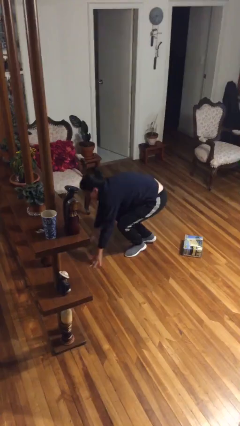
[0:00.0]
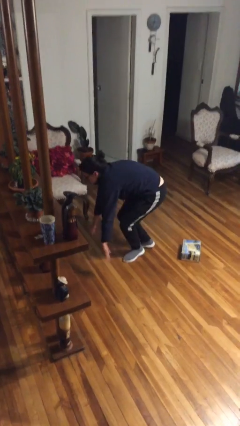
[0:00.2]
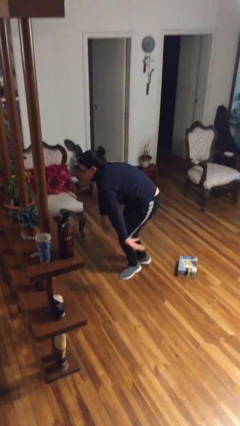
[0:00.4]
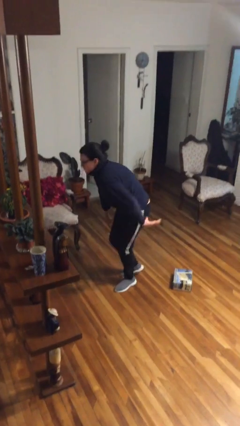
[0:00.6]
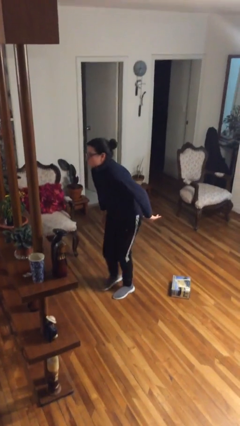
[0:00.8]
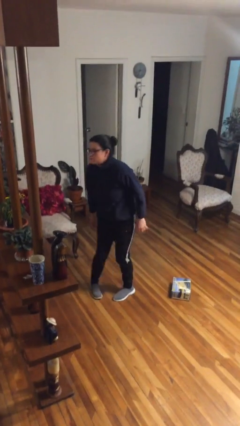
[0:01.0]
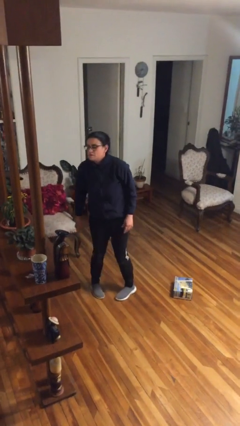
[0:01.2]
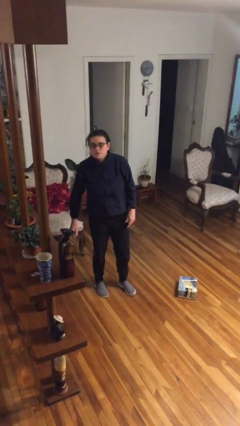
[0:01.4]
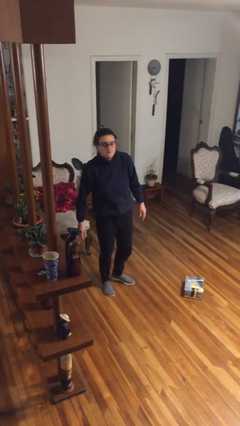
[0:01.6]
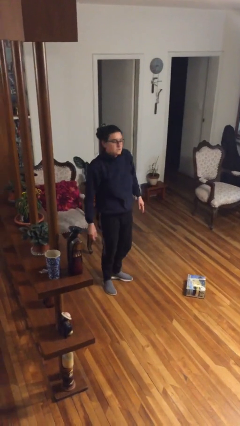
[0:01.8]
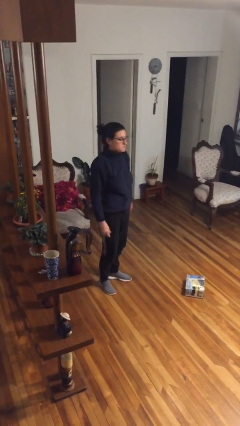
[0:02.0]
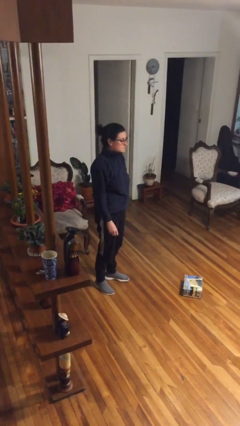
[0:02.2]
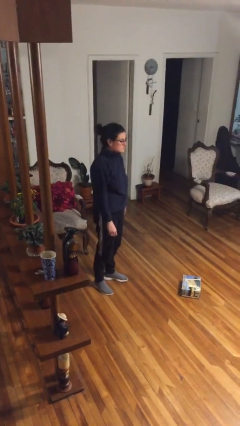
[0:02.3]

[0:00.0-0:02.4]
person stands up from floor

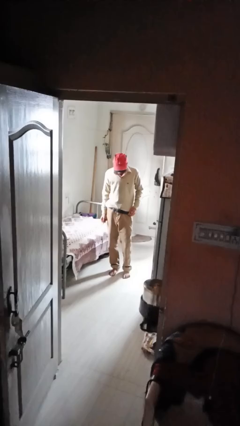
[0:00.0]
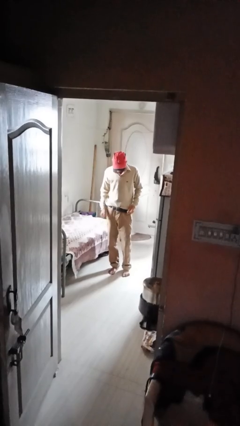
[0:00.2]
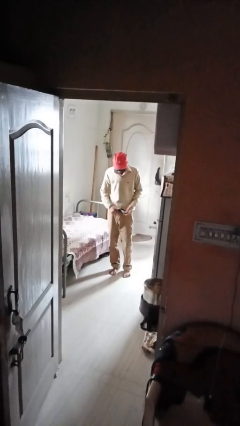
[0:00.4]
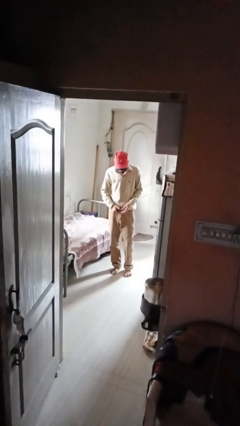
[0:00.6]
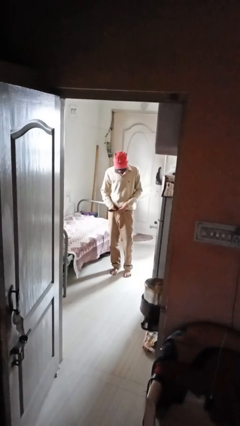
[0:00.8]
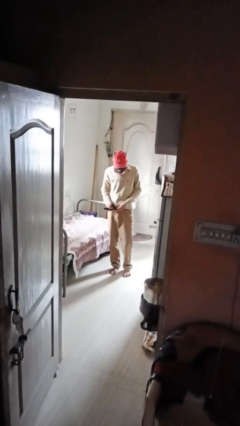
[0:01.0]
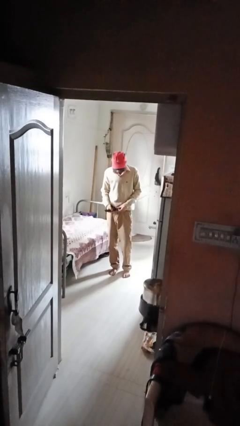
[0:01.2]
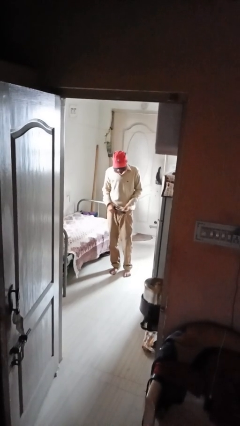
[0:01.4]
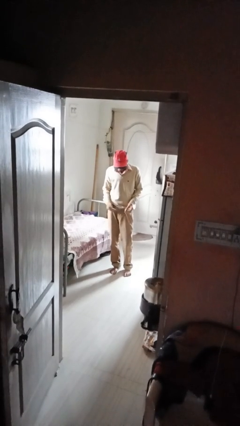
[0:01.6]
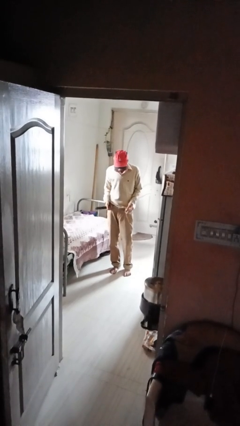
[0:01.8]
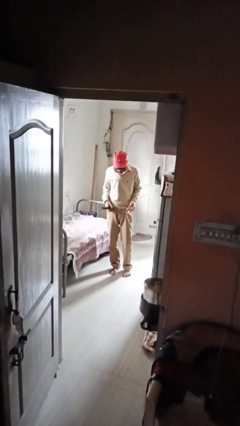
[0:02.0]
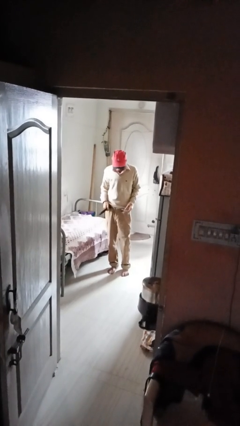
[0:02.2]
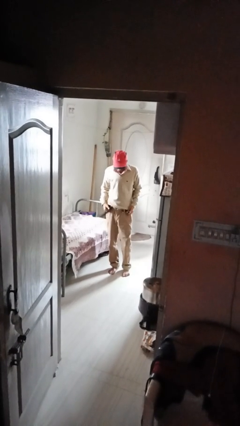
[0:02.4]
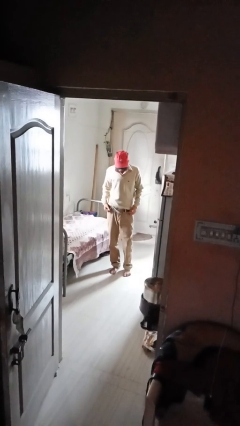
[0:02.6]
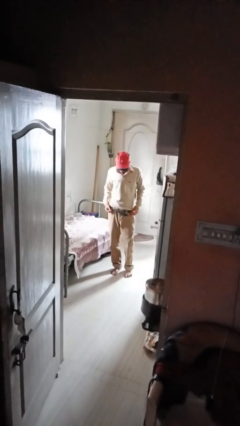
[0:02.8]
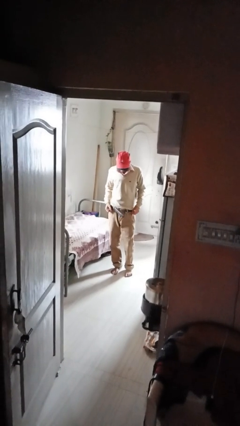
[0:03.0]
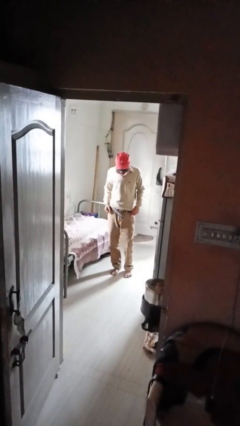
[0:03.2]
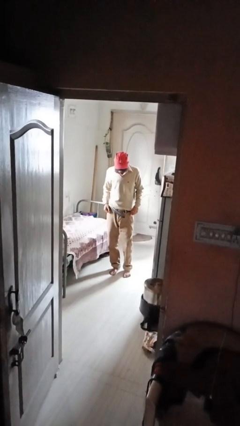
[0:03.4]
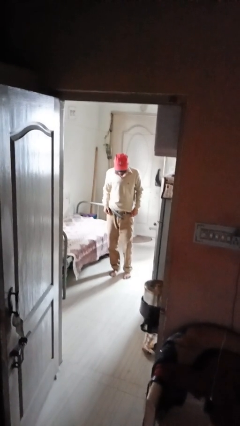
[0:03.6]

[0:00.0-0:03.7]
person takes off belt

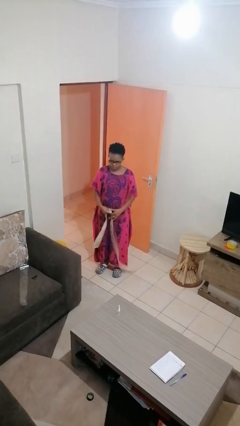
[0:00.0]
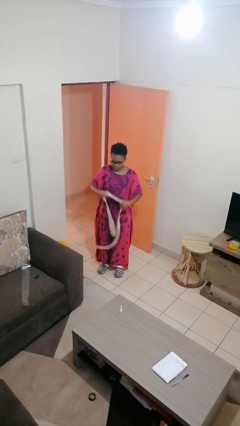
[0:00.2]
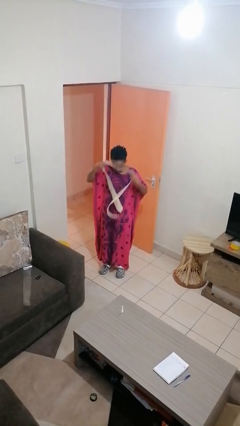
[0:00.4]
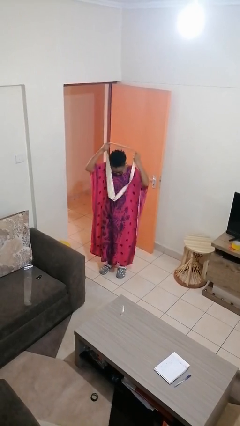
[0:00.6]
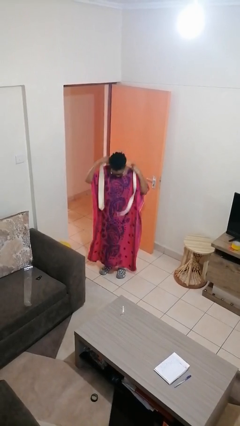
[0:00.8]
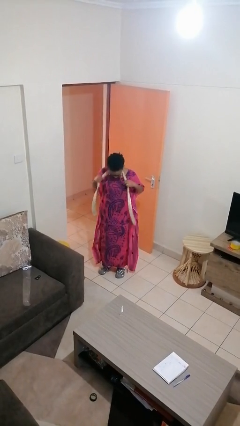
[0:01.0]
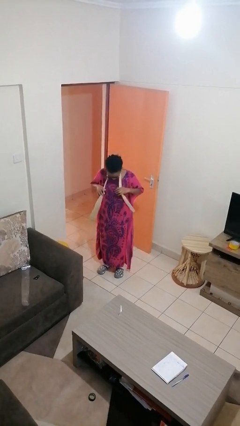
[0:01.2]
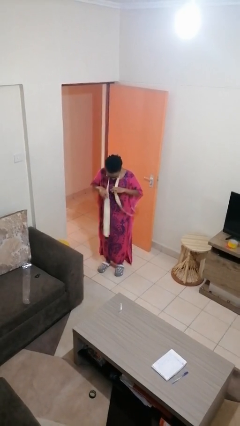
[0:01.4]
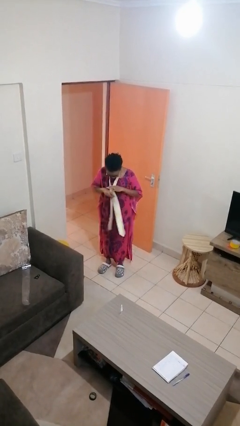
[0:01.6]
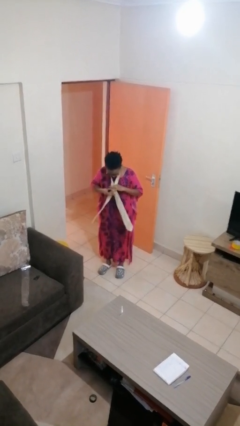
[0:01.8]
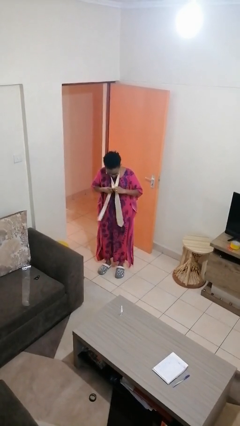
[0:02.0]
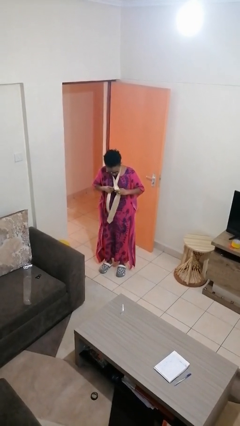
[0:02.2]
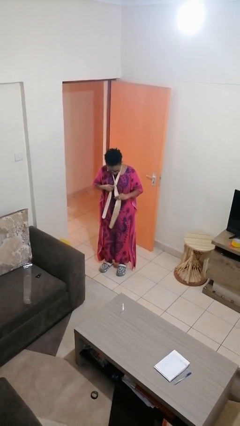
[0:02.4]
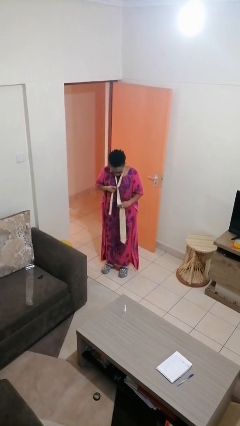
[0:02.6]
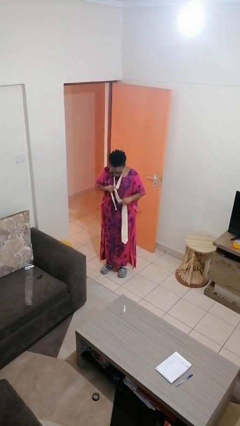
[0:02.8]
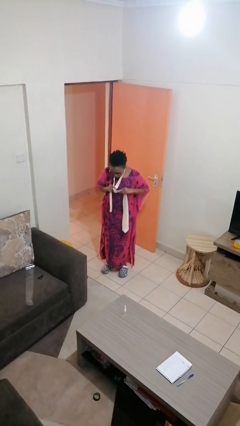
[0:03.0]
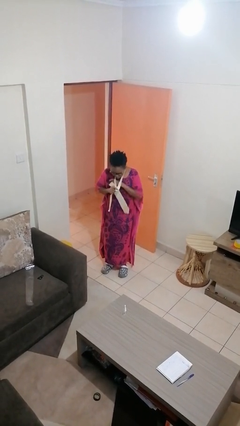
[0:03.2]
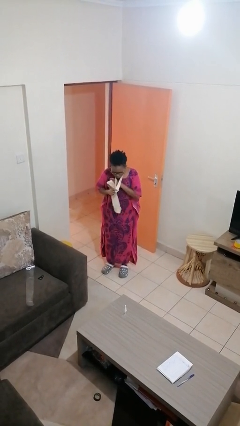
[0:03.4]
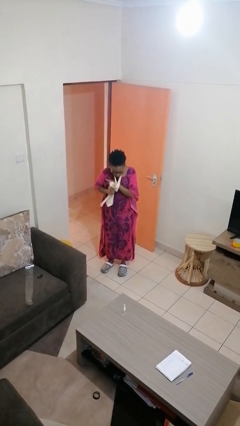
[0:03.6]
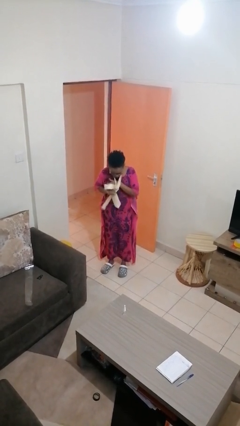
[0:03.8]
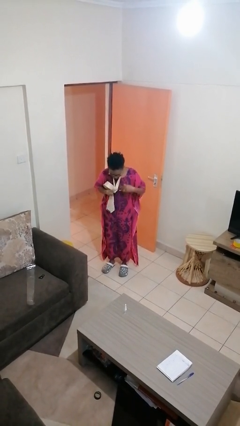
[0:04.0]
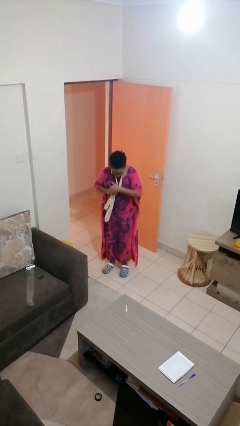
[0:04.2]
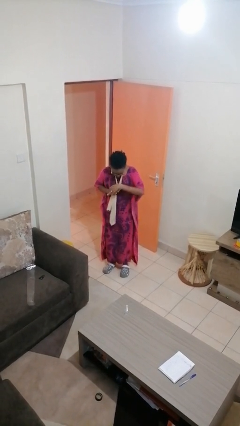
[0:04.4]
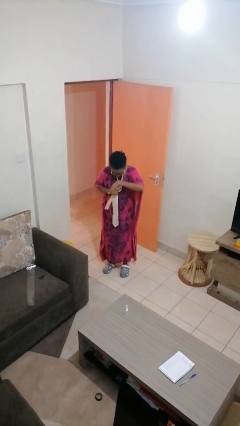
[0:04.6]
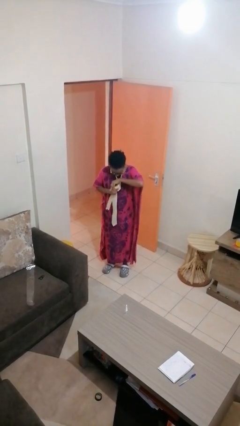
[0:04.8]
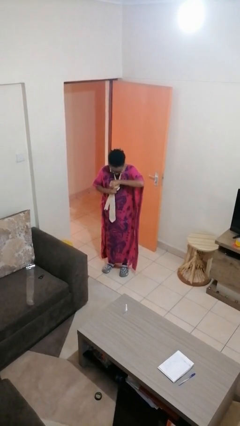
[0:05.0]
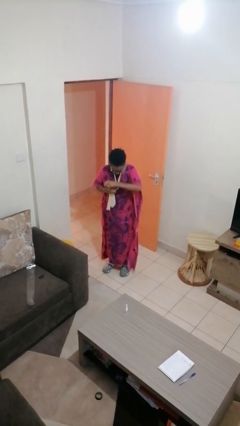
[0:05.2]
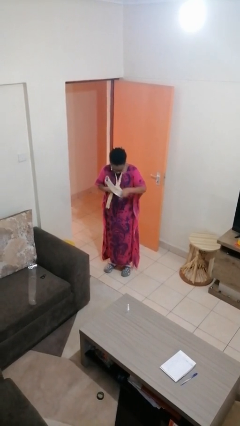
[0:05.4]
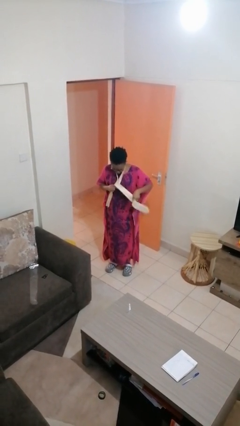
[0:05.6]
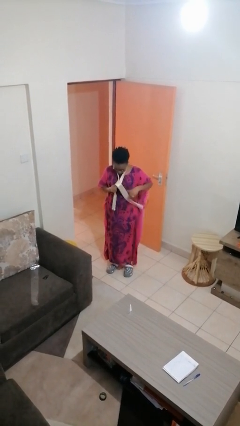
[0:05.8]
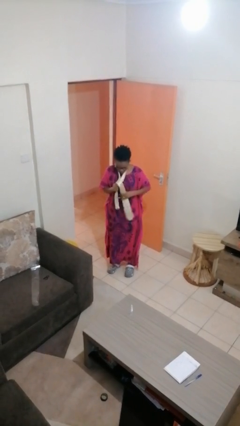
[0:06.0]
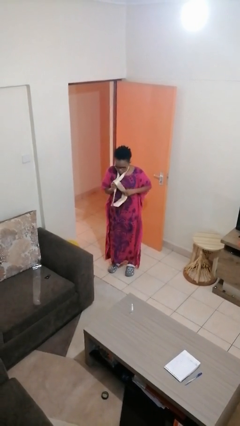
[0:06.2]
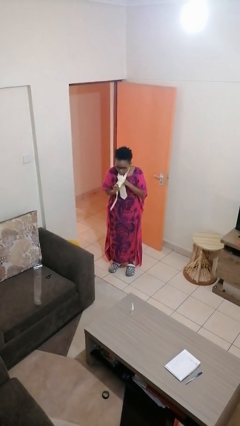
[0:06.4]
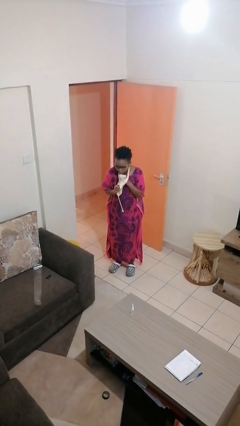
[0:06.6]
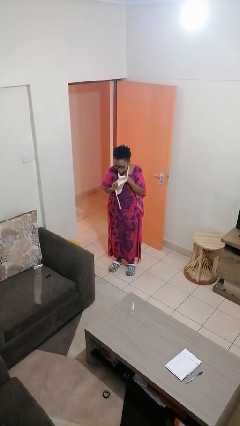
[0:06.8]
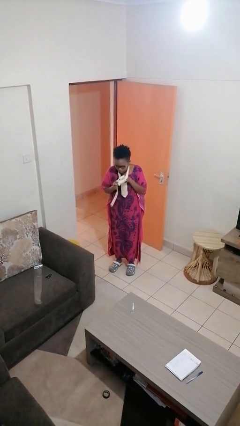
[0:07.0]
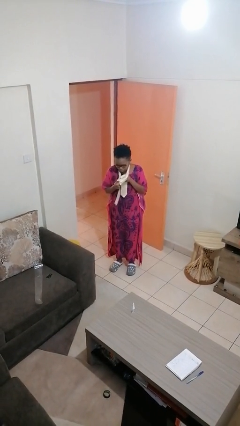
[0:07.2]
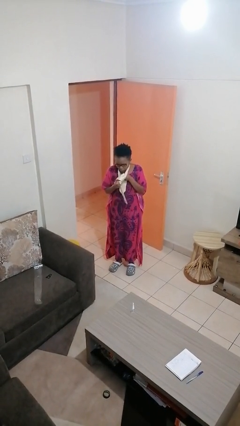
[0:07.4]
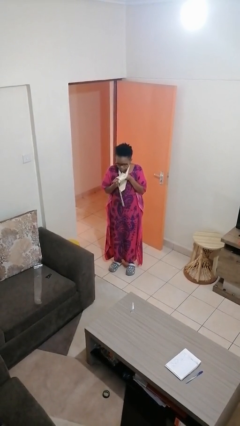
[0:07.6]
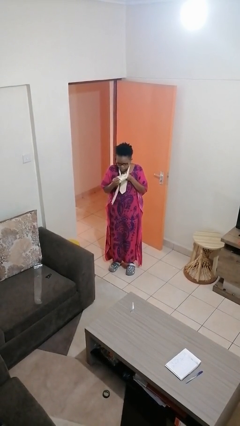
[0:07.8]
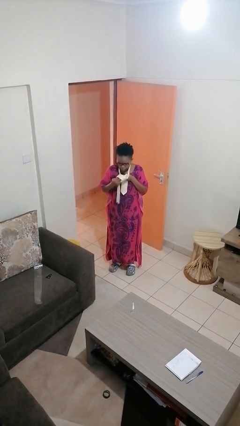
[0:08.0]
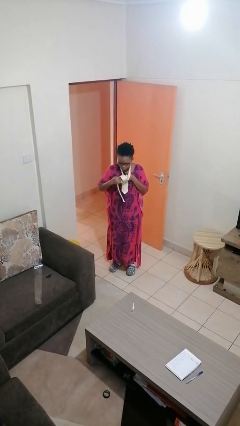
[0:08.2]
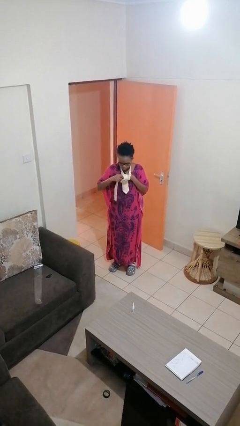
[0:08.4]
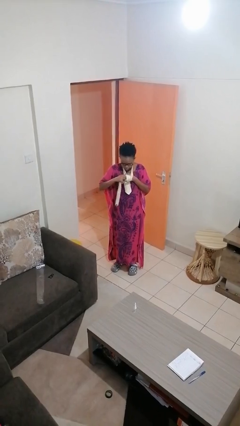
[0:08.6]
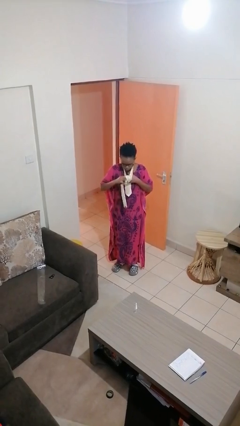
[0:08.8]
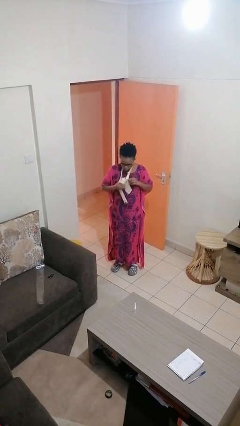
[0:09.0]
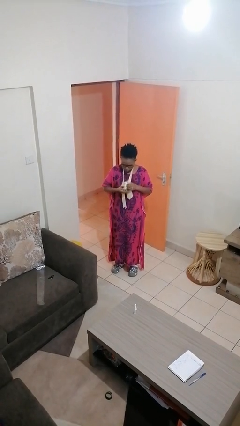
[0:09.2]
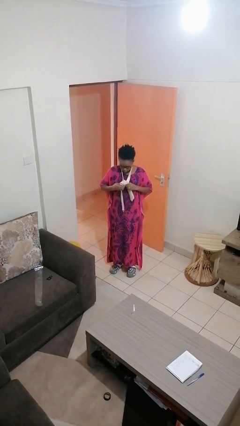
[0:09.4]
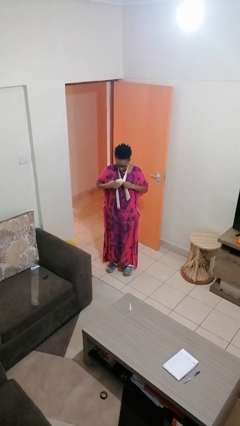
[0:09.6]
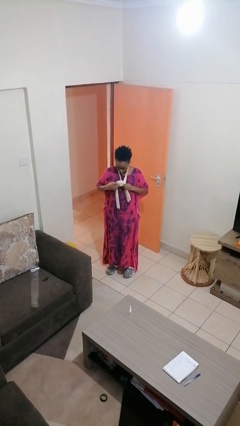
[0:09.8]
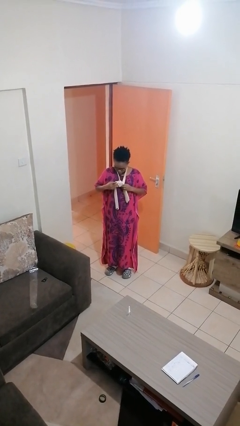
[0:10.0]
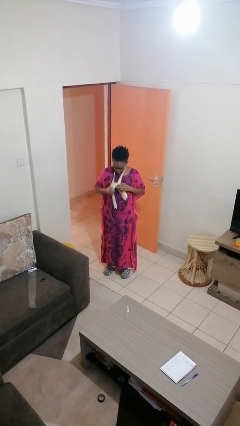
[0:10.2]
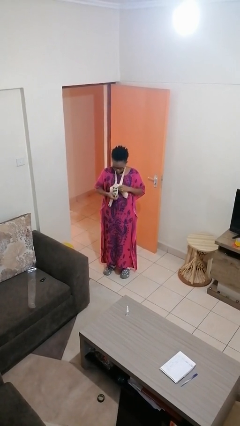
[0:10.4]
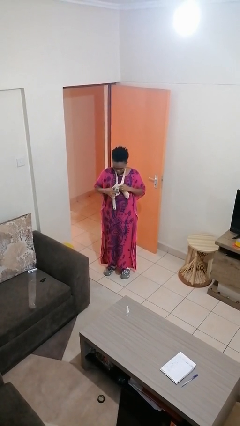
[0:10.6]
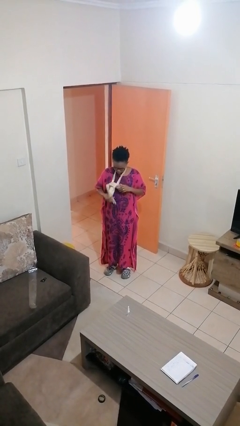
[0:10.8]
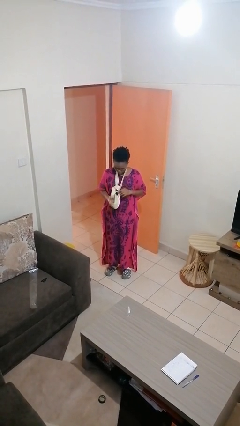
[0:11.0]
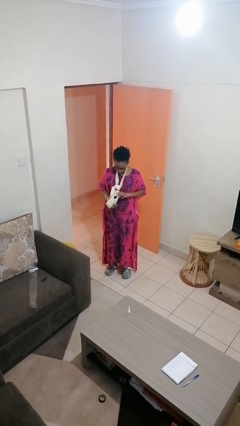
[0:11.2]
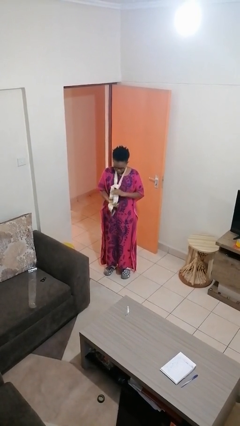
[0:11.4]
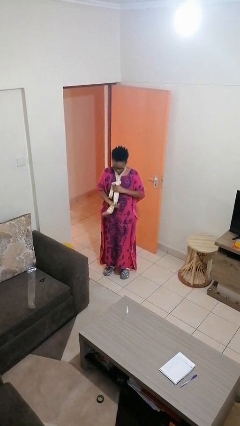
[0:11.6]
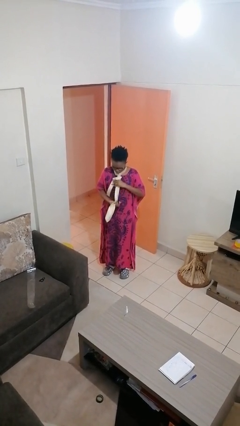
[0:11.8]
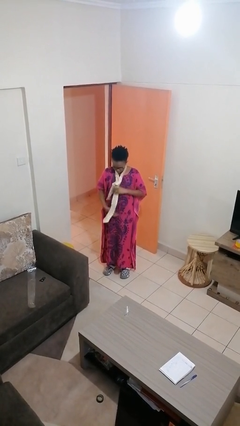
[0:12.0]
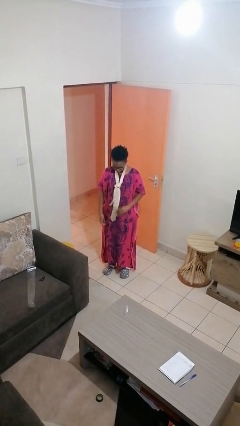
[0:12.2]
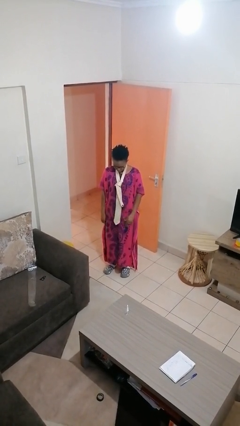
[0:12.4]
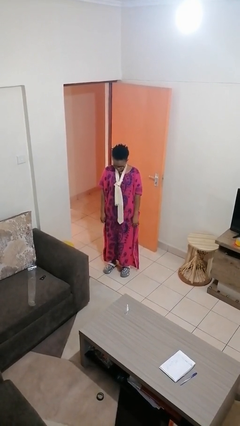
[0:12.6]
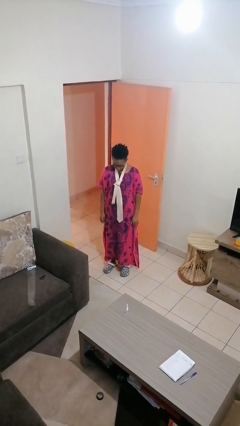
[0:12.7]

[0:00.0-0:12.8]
person puts on necktie
